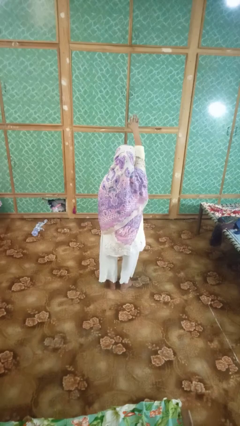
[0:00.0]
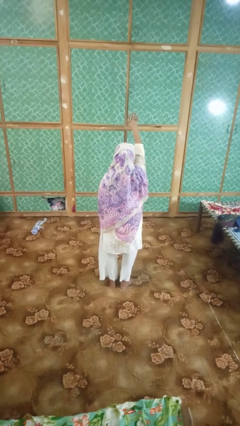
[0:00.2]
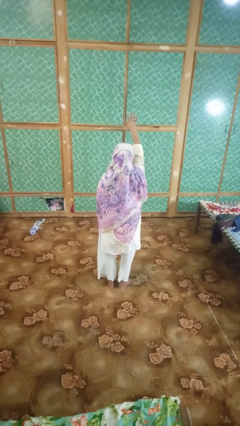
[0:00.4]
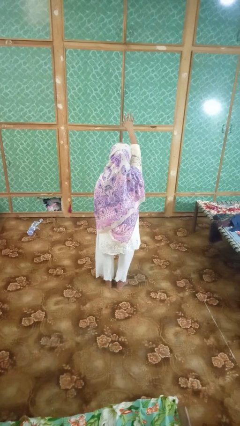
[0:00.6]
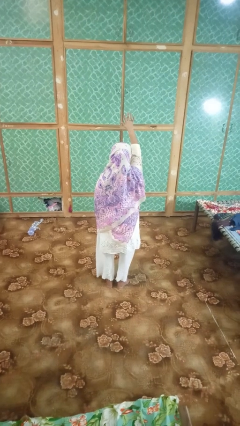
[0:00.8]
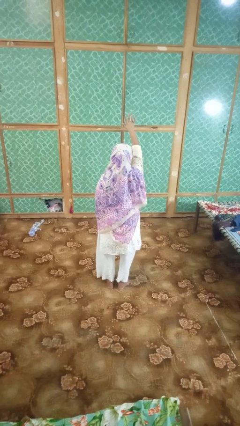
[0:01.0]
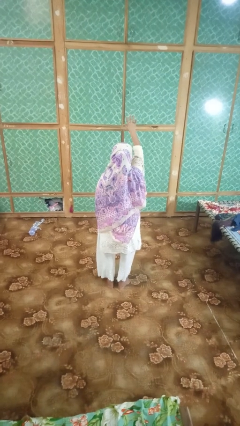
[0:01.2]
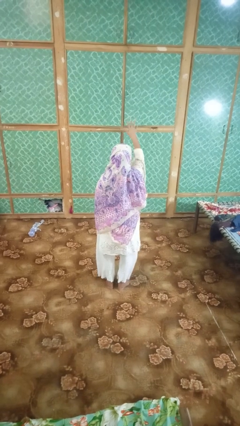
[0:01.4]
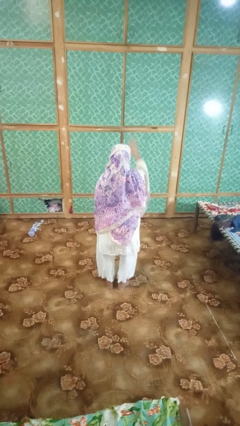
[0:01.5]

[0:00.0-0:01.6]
person gestures number five

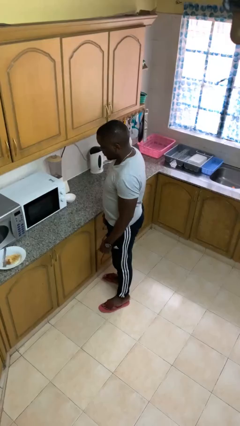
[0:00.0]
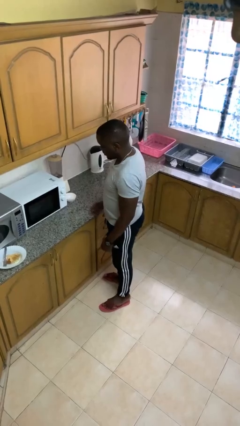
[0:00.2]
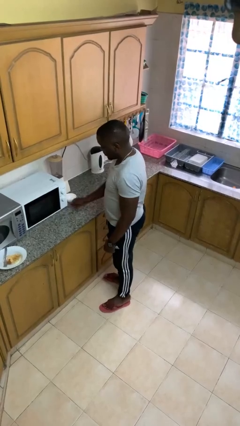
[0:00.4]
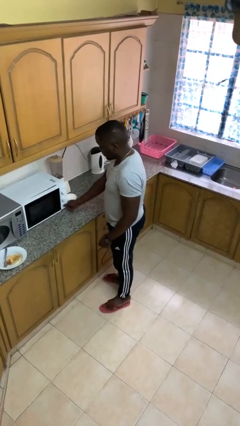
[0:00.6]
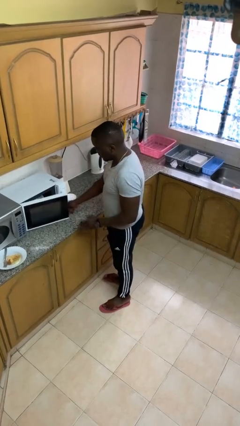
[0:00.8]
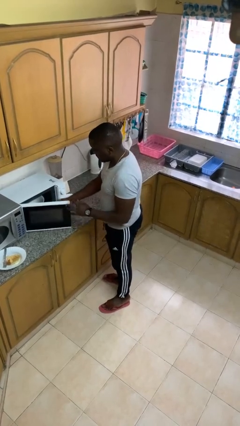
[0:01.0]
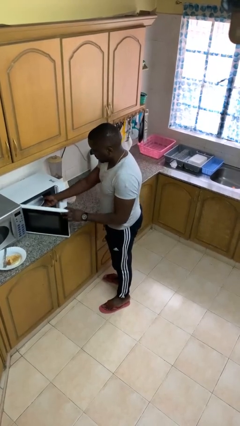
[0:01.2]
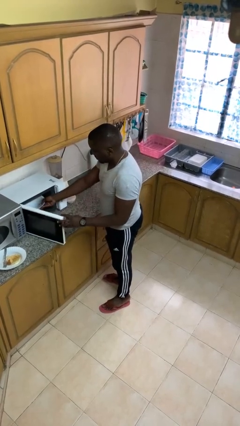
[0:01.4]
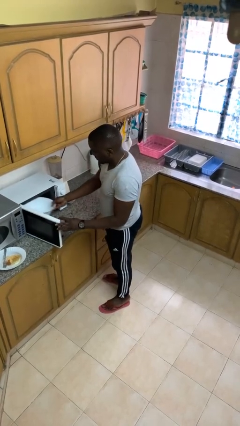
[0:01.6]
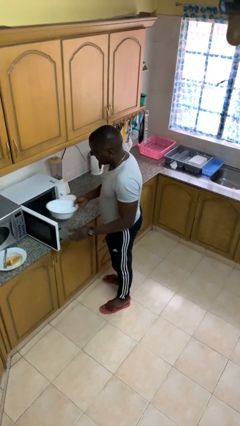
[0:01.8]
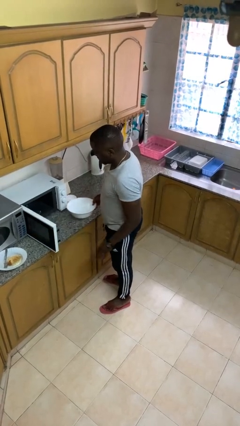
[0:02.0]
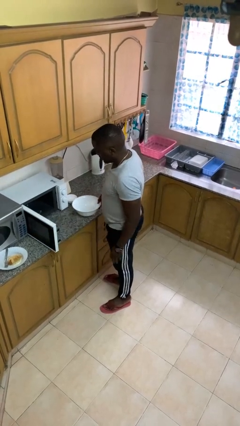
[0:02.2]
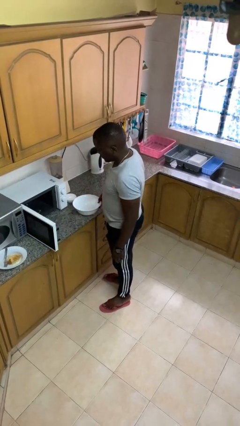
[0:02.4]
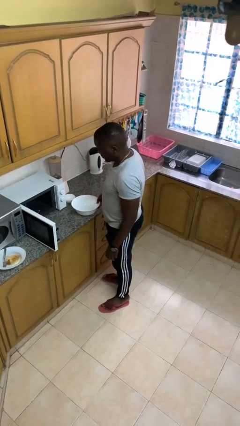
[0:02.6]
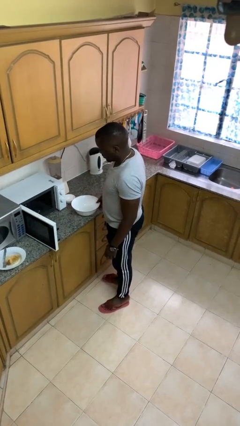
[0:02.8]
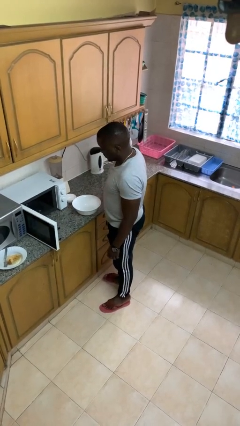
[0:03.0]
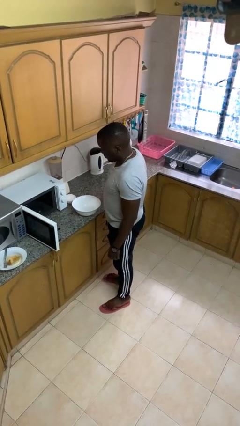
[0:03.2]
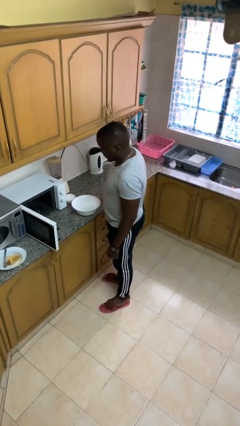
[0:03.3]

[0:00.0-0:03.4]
person takes object from microwave

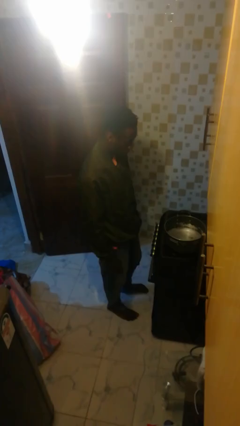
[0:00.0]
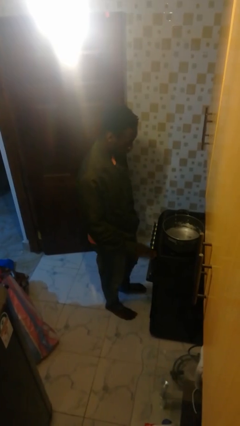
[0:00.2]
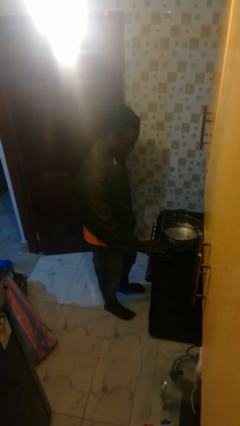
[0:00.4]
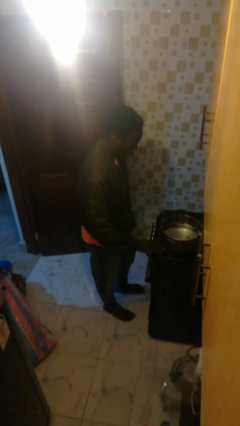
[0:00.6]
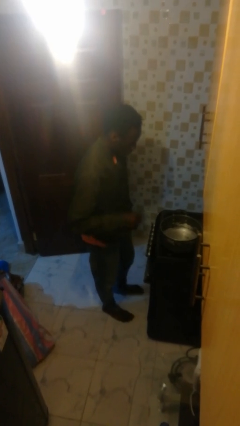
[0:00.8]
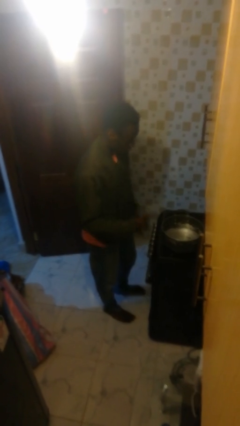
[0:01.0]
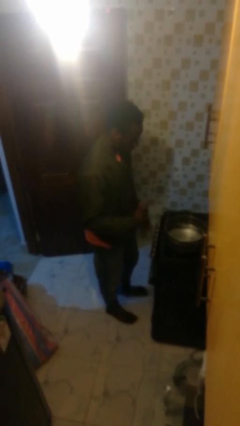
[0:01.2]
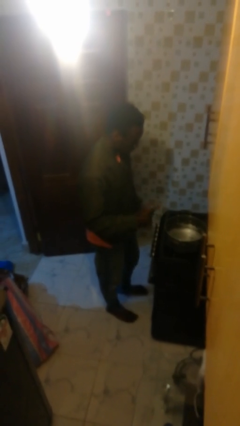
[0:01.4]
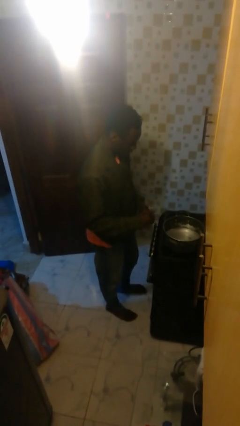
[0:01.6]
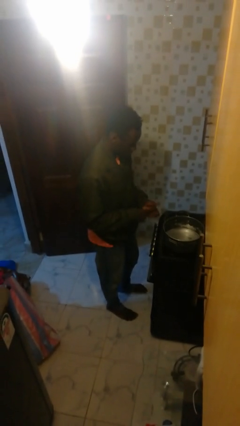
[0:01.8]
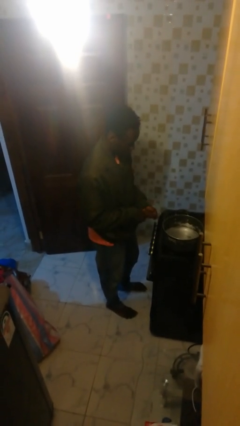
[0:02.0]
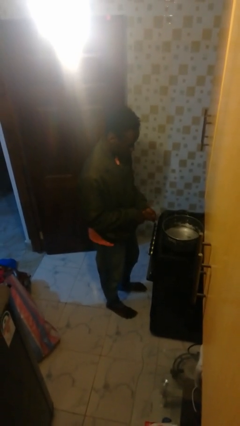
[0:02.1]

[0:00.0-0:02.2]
person burns hand

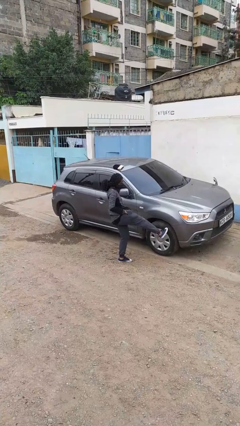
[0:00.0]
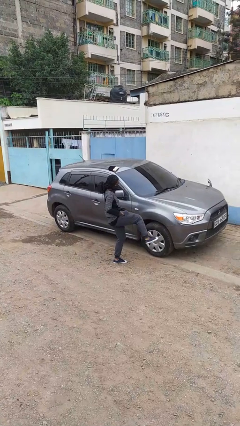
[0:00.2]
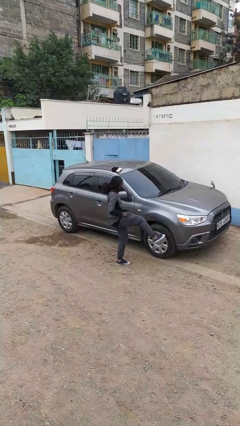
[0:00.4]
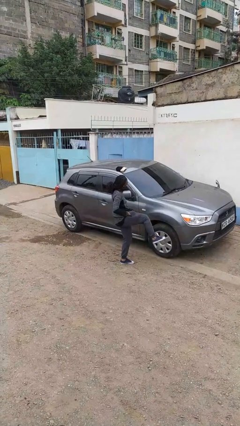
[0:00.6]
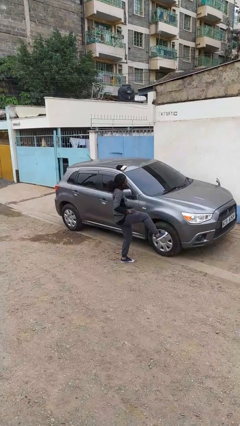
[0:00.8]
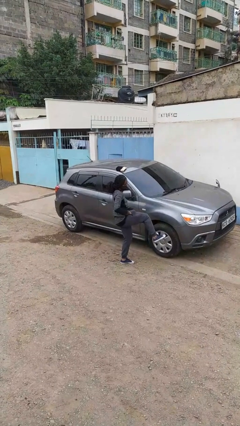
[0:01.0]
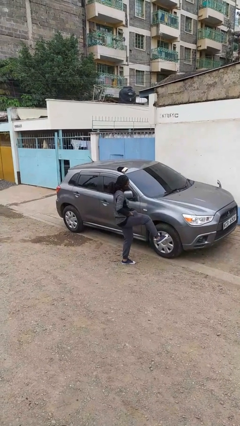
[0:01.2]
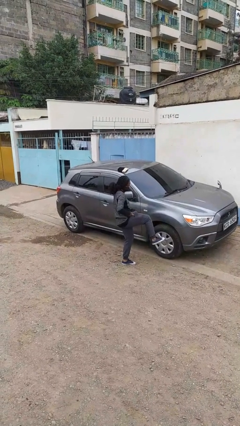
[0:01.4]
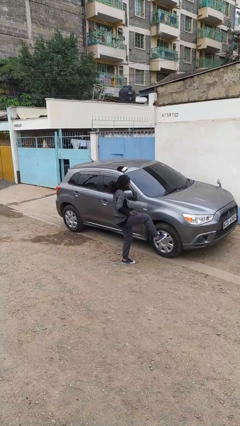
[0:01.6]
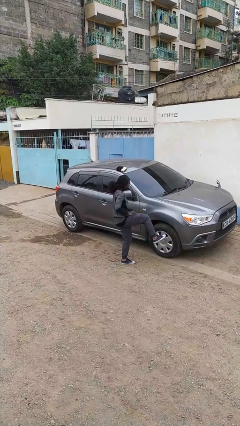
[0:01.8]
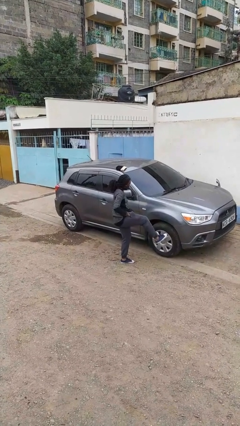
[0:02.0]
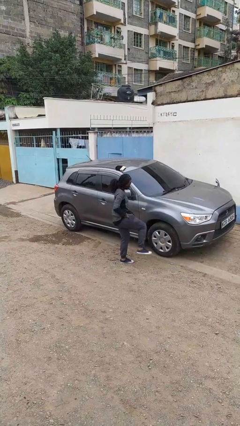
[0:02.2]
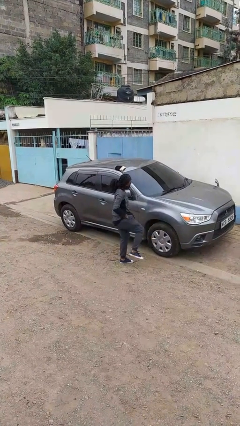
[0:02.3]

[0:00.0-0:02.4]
person kicks car tires

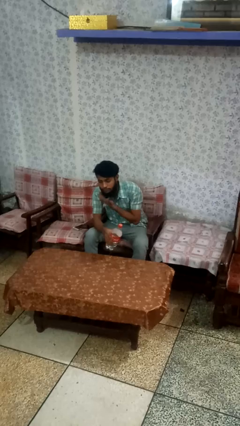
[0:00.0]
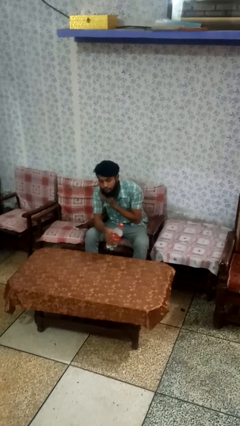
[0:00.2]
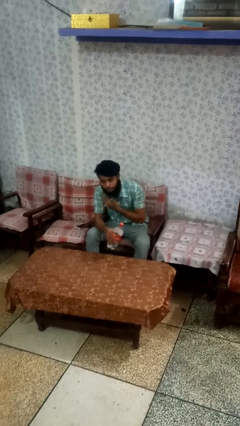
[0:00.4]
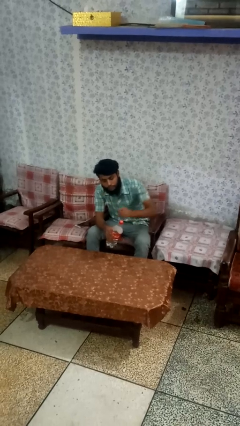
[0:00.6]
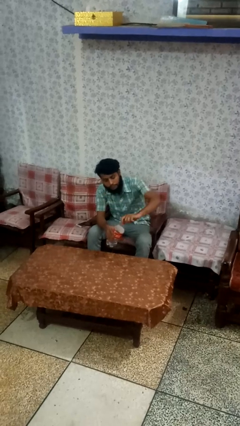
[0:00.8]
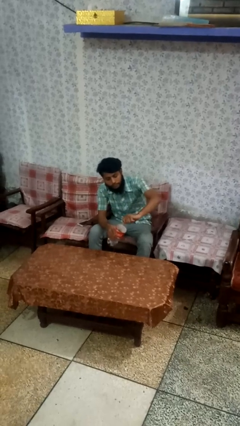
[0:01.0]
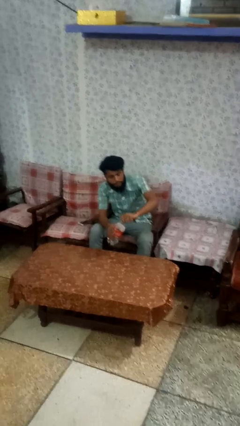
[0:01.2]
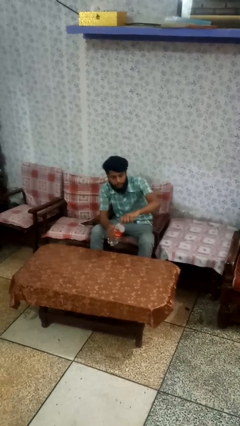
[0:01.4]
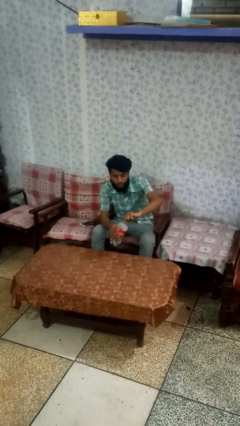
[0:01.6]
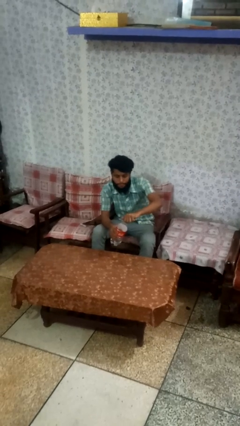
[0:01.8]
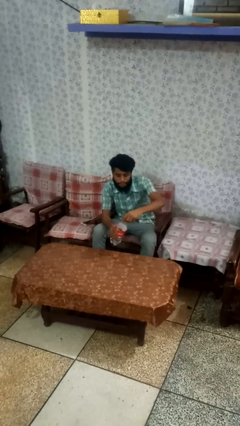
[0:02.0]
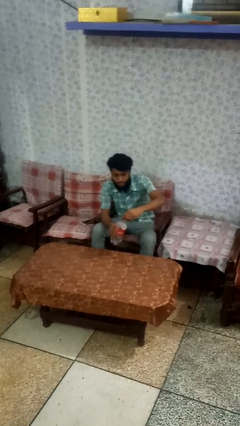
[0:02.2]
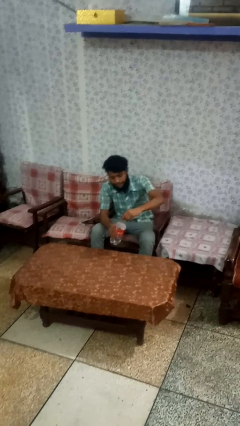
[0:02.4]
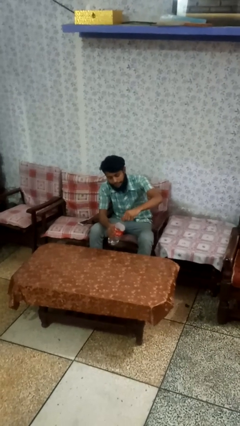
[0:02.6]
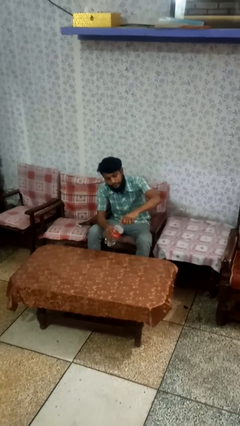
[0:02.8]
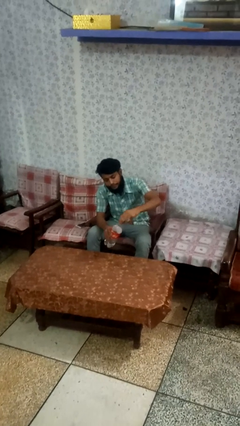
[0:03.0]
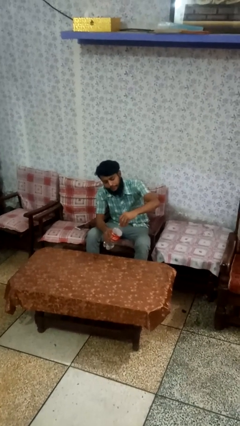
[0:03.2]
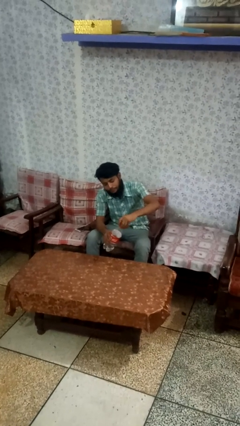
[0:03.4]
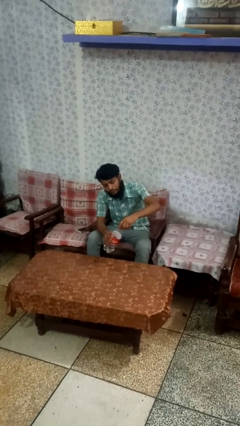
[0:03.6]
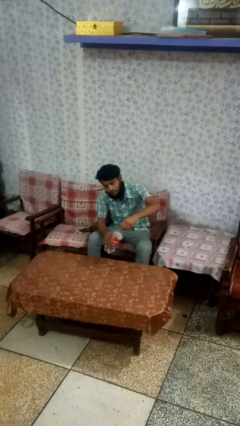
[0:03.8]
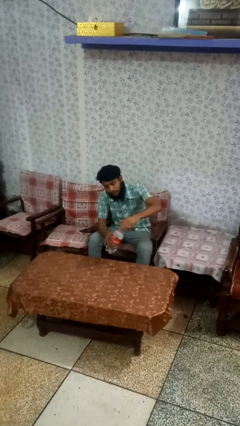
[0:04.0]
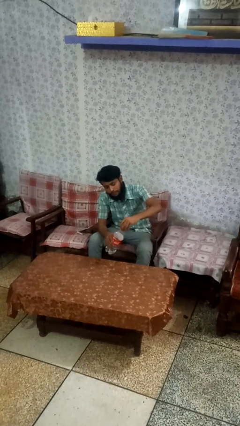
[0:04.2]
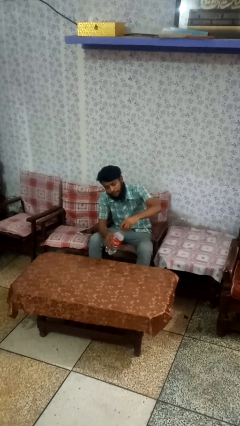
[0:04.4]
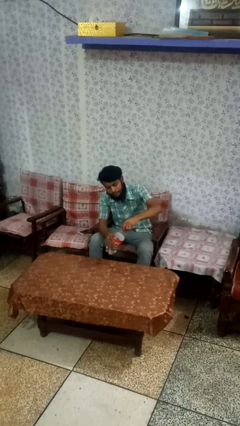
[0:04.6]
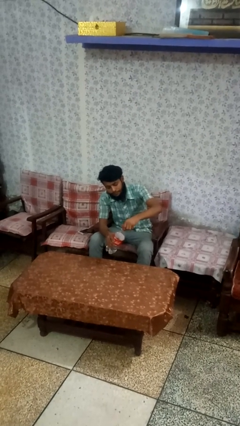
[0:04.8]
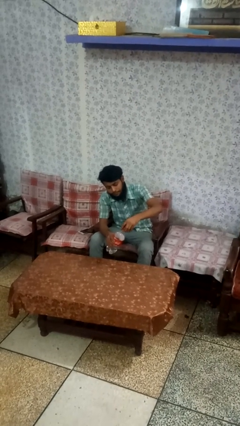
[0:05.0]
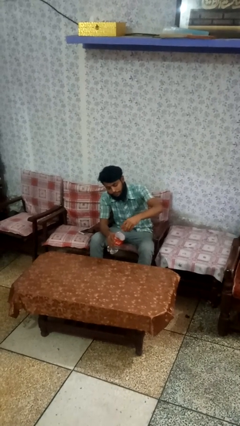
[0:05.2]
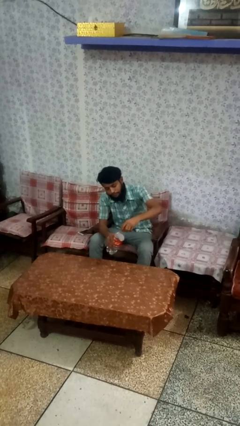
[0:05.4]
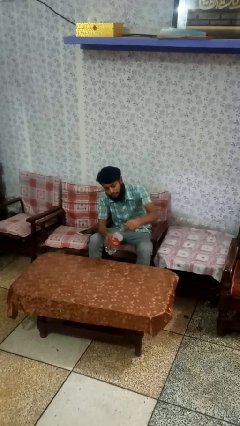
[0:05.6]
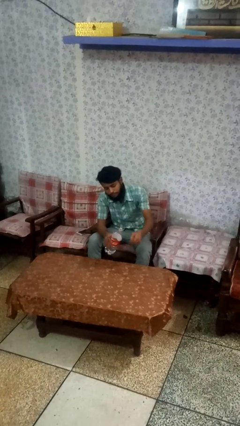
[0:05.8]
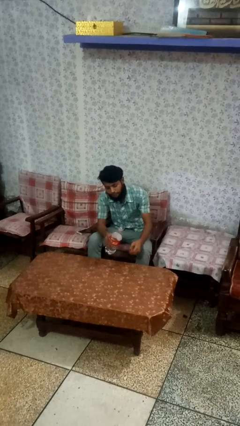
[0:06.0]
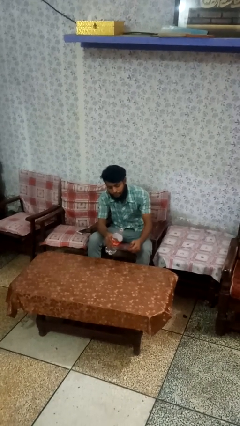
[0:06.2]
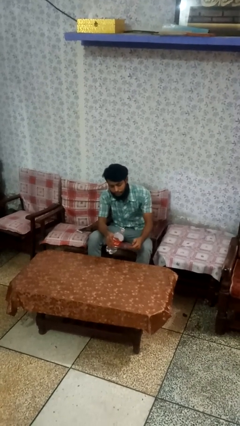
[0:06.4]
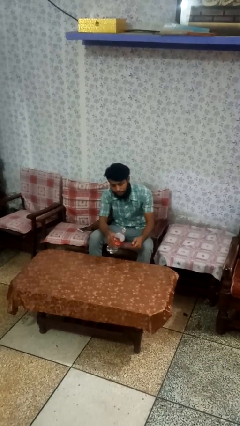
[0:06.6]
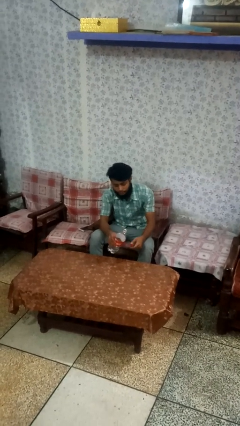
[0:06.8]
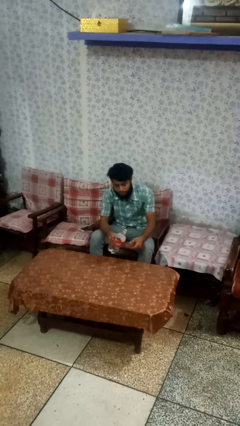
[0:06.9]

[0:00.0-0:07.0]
person unscrews lid from bottle

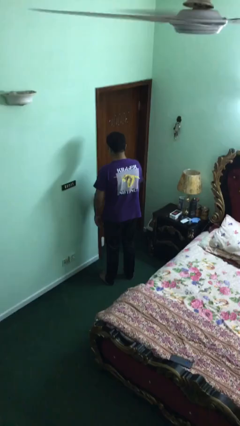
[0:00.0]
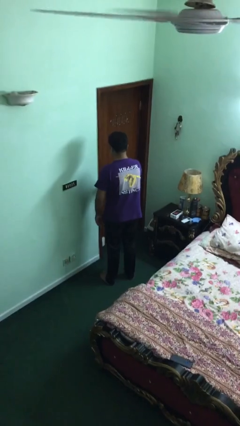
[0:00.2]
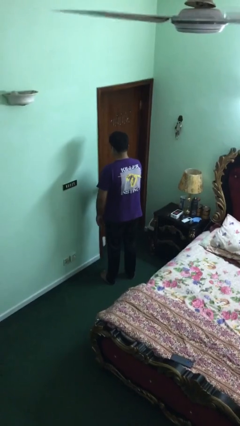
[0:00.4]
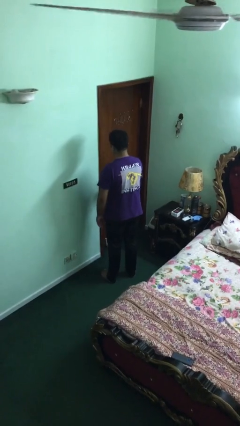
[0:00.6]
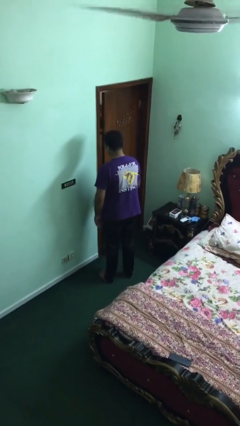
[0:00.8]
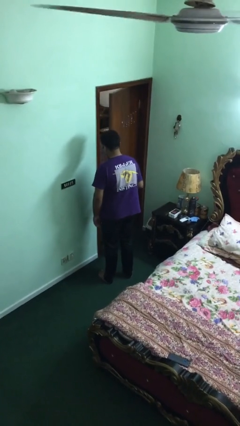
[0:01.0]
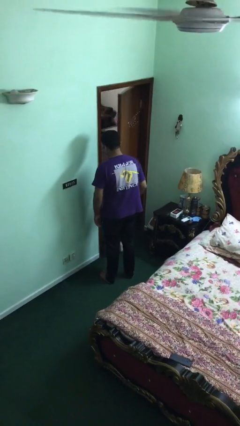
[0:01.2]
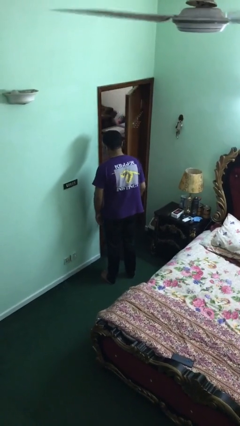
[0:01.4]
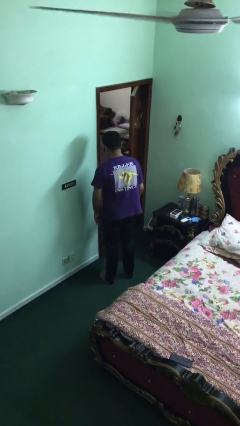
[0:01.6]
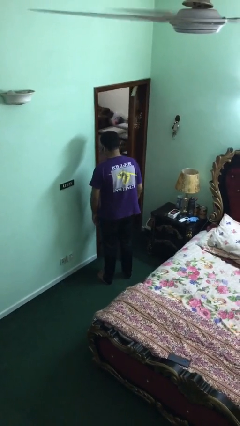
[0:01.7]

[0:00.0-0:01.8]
person opens facility door
